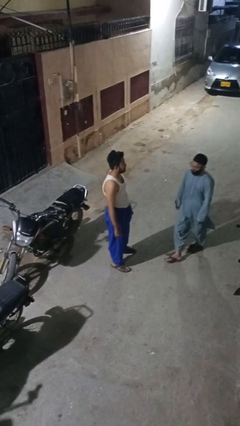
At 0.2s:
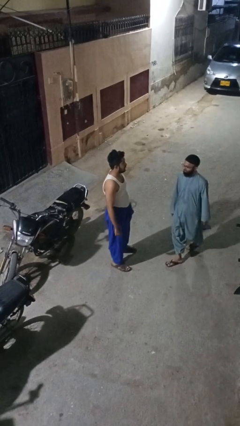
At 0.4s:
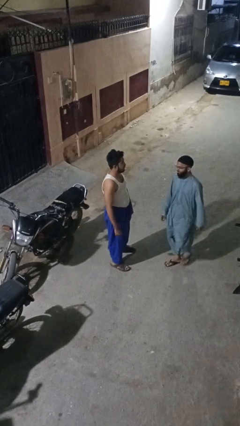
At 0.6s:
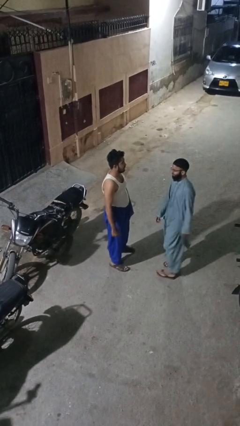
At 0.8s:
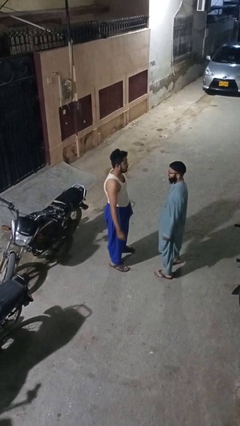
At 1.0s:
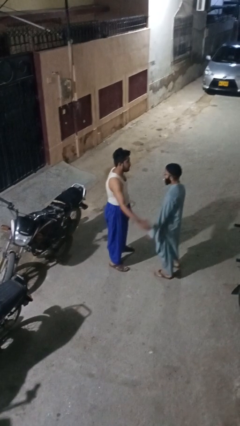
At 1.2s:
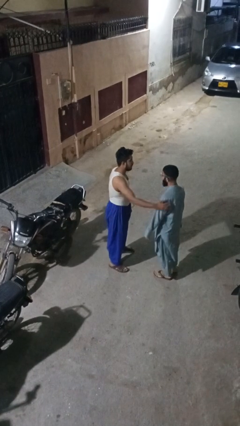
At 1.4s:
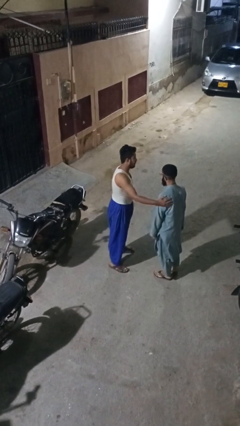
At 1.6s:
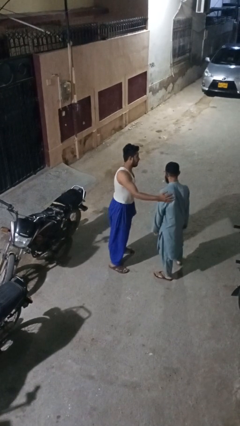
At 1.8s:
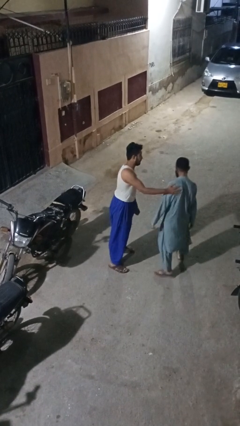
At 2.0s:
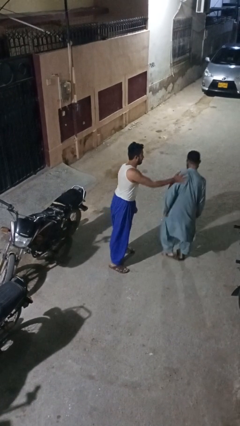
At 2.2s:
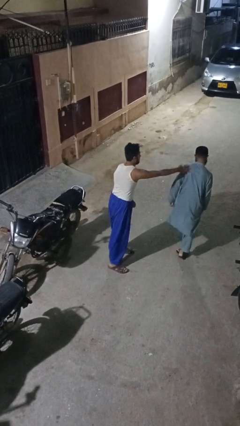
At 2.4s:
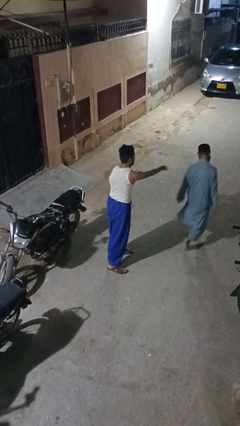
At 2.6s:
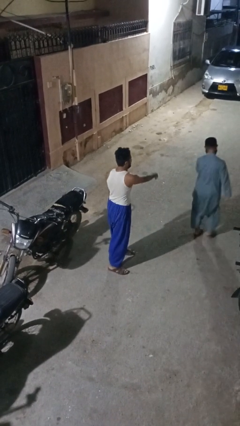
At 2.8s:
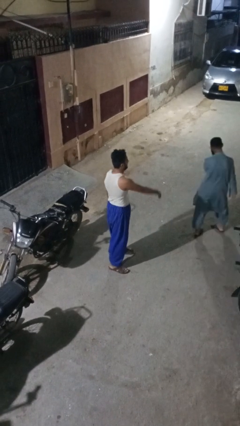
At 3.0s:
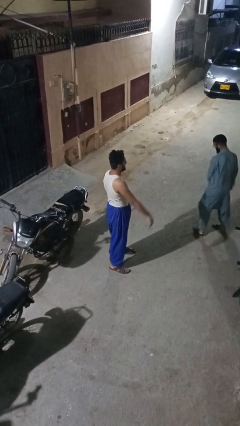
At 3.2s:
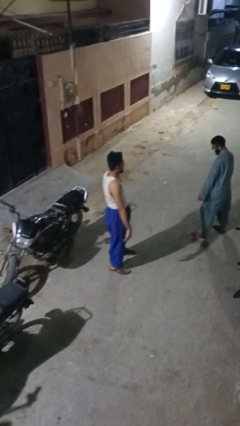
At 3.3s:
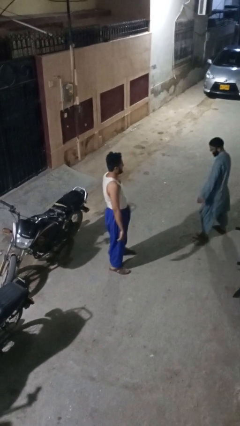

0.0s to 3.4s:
person shoves person

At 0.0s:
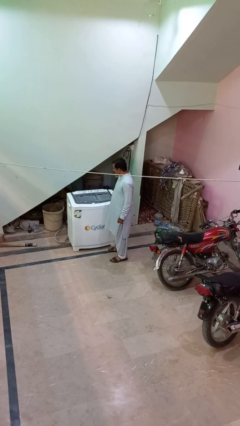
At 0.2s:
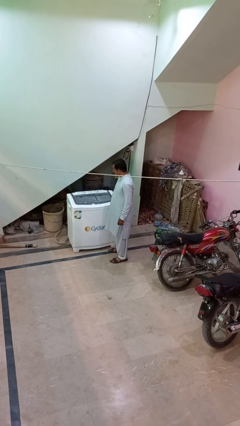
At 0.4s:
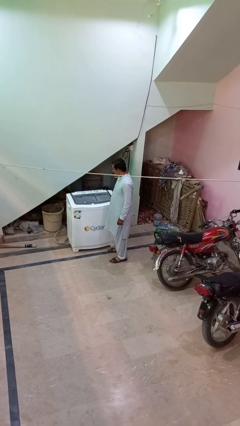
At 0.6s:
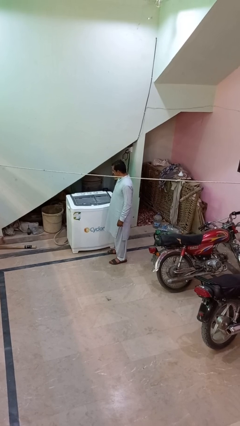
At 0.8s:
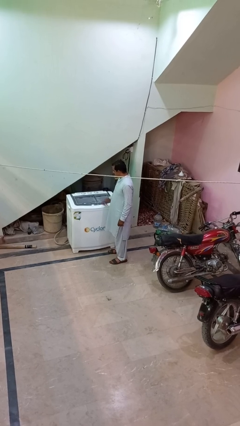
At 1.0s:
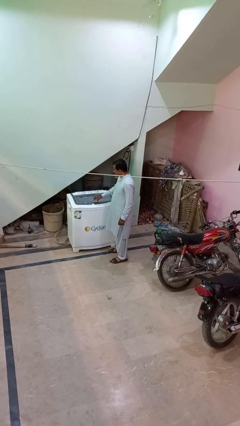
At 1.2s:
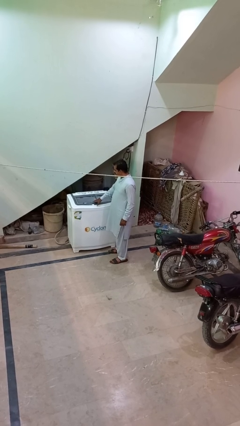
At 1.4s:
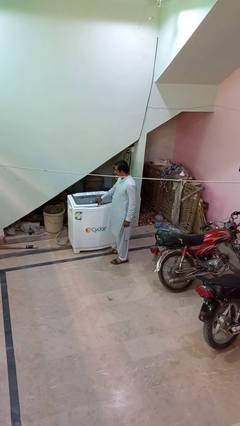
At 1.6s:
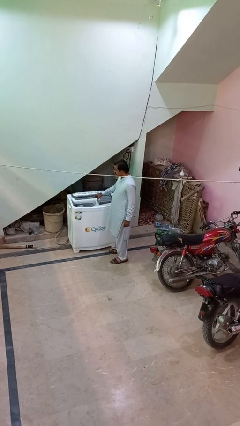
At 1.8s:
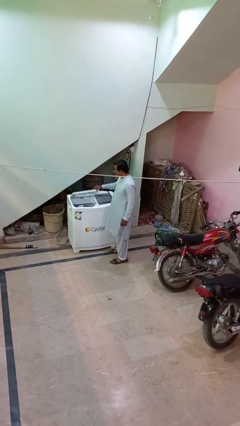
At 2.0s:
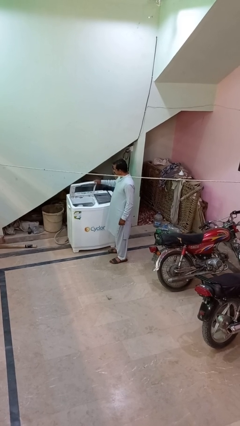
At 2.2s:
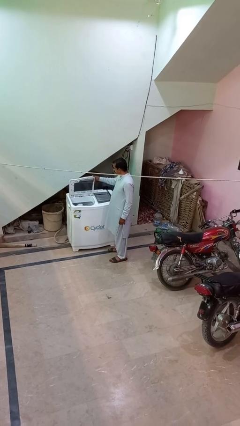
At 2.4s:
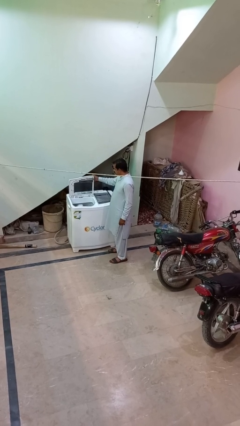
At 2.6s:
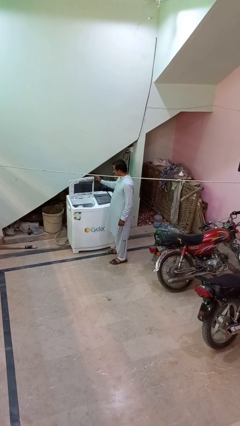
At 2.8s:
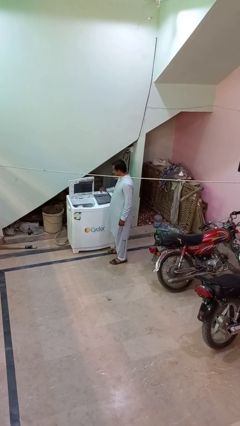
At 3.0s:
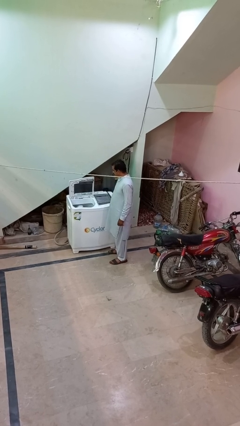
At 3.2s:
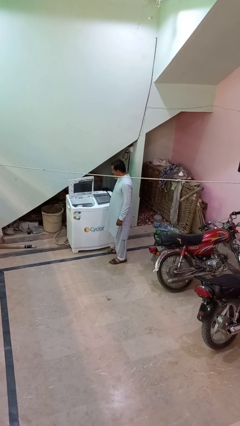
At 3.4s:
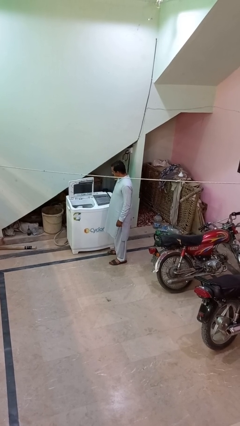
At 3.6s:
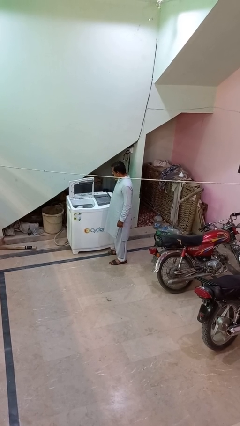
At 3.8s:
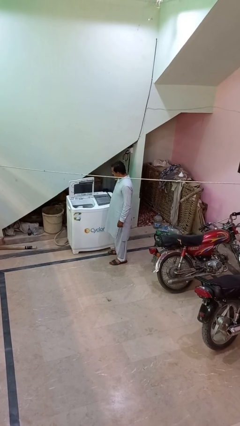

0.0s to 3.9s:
person opens clothes washer

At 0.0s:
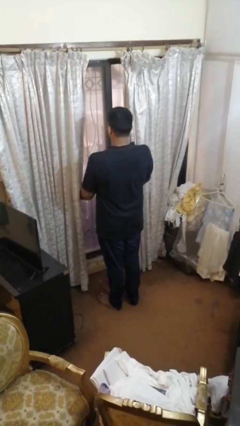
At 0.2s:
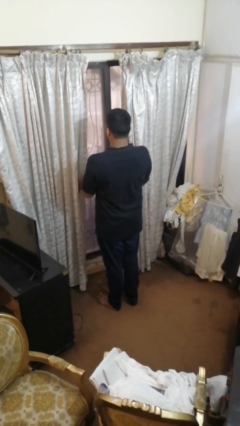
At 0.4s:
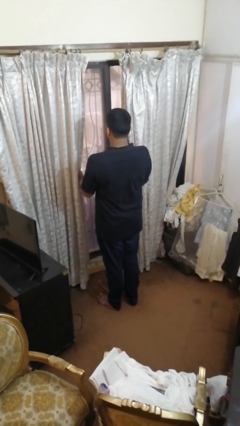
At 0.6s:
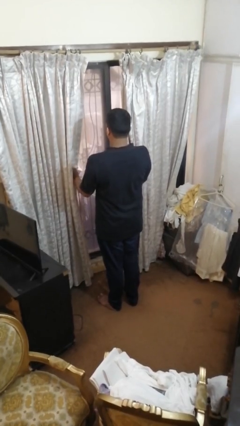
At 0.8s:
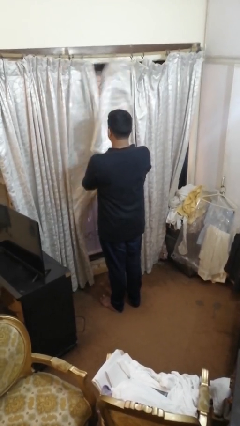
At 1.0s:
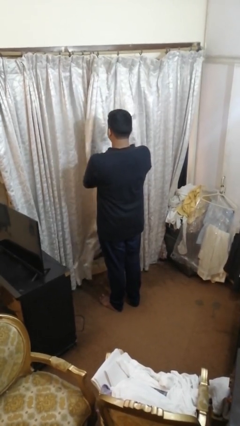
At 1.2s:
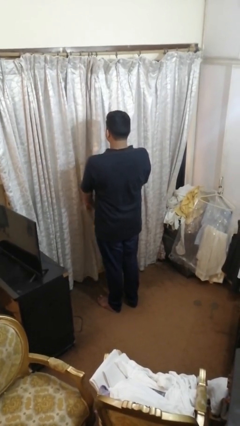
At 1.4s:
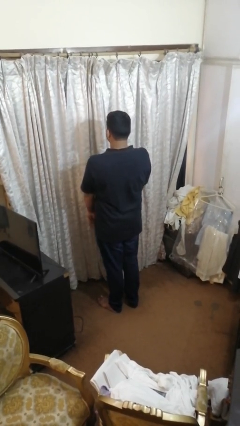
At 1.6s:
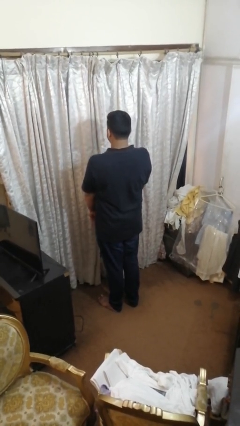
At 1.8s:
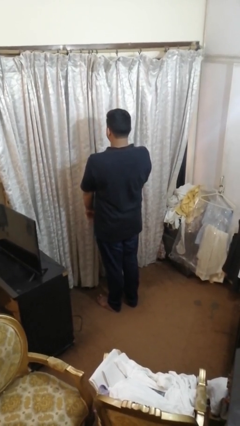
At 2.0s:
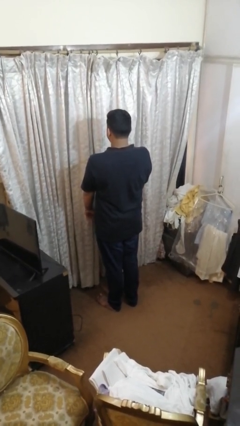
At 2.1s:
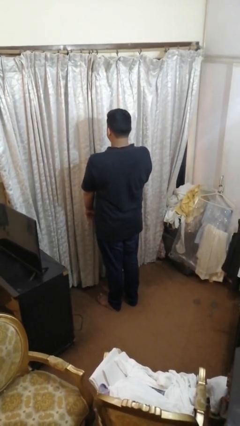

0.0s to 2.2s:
person closes curtains

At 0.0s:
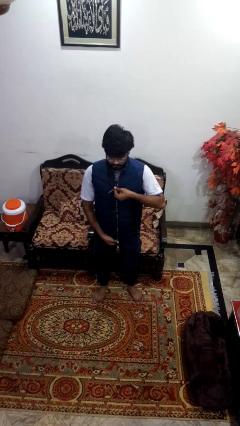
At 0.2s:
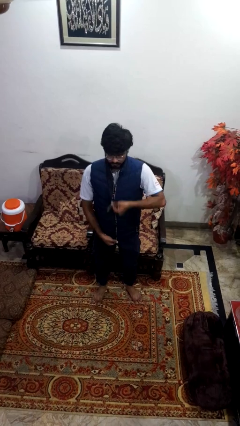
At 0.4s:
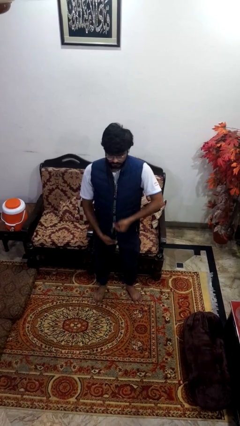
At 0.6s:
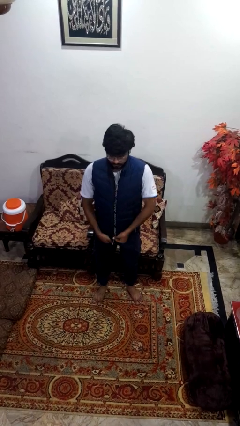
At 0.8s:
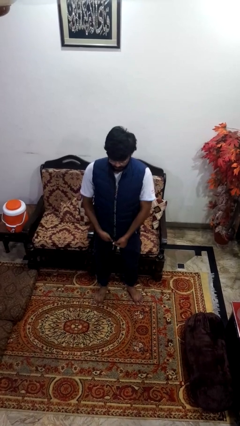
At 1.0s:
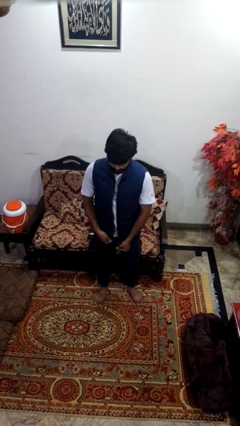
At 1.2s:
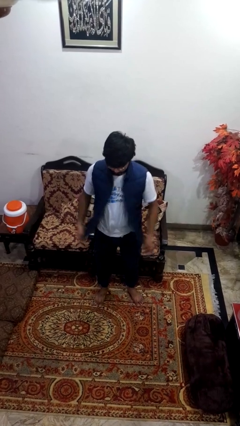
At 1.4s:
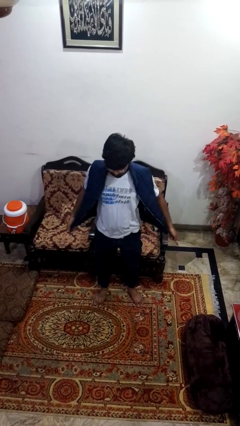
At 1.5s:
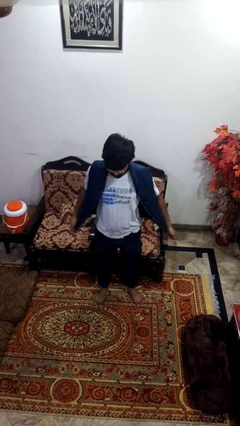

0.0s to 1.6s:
person unzips jacket

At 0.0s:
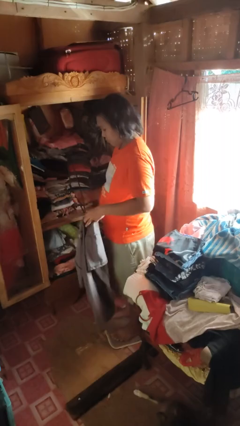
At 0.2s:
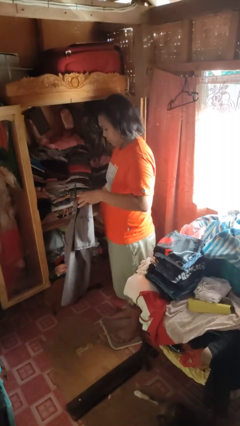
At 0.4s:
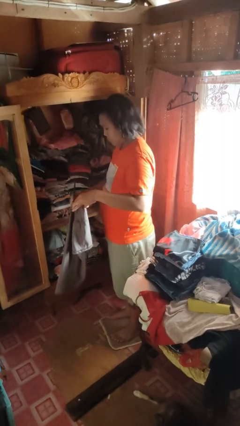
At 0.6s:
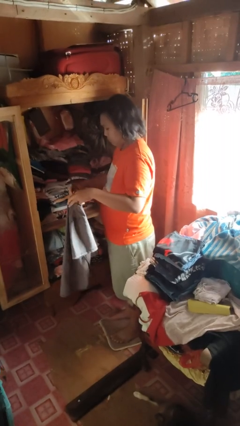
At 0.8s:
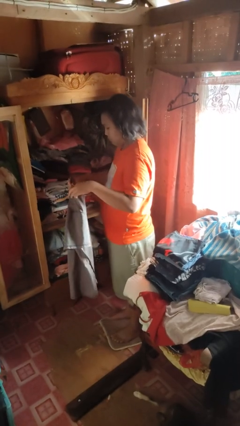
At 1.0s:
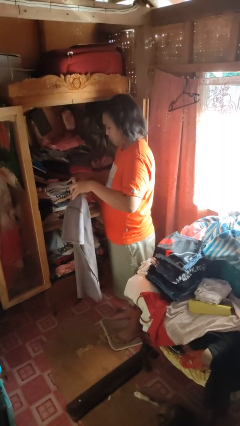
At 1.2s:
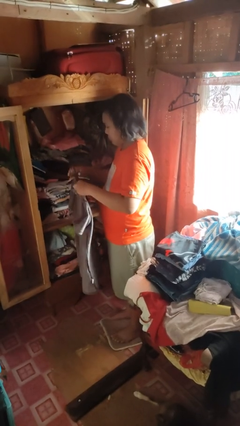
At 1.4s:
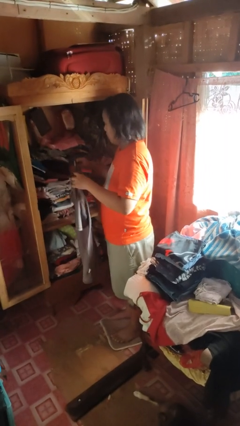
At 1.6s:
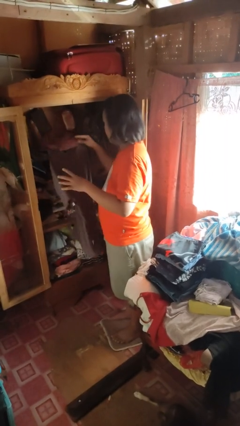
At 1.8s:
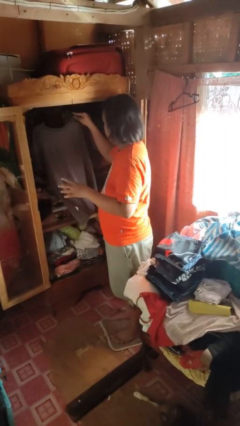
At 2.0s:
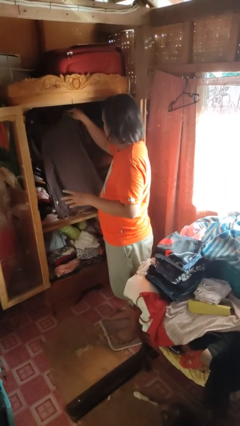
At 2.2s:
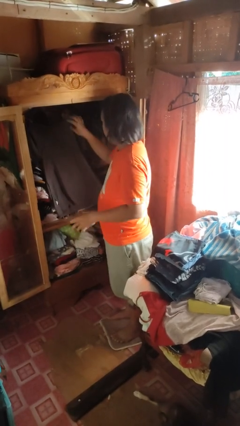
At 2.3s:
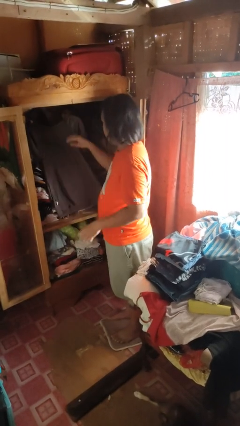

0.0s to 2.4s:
person puts clothes into closet

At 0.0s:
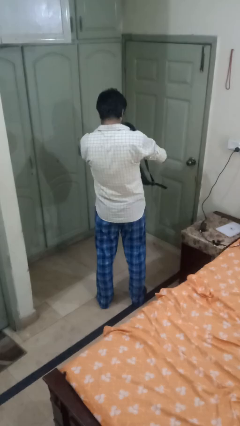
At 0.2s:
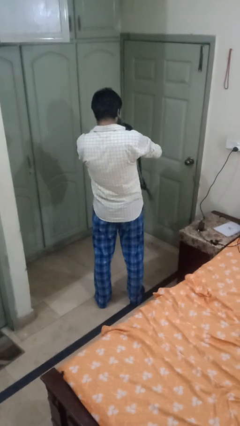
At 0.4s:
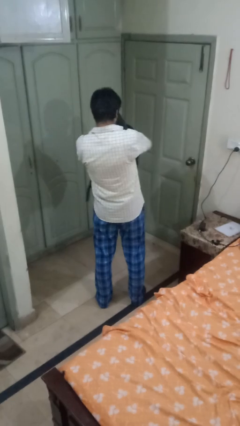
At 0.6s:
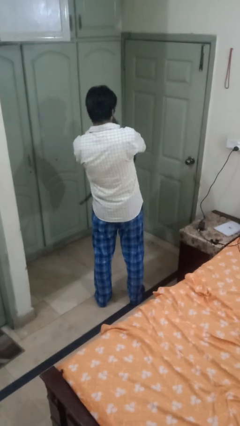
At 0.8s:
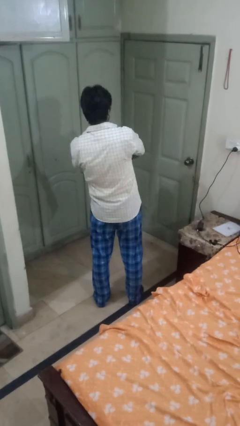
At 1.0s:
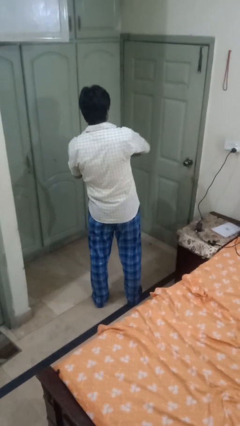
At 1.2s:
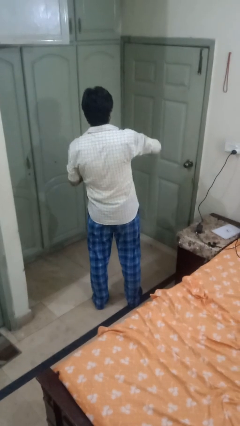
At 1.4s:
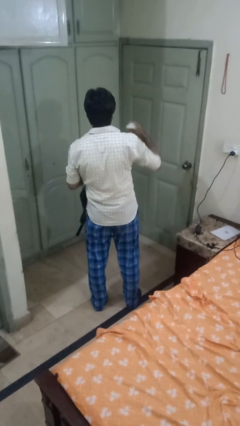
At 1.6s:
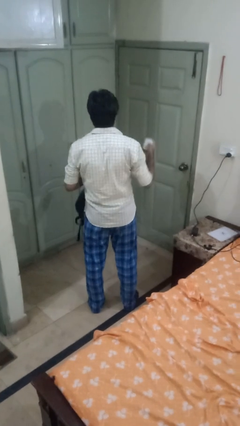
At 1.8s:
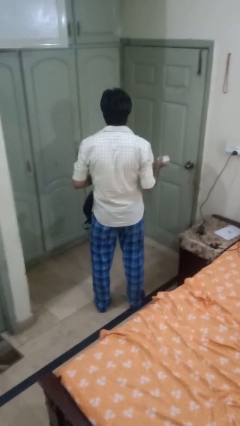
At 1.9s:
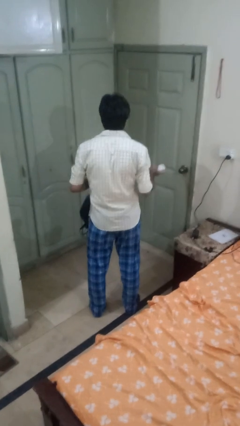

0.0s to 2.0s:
person takes object from backpack

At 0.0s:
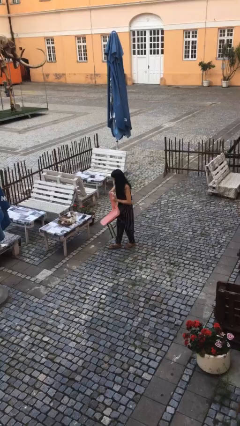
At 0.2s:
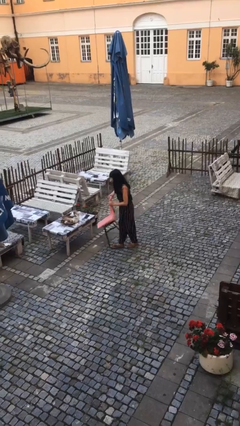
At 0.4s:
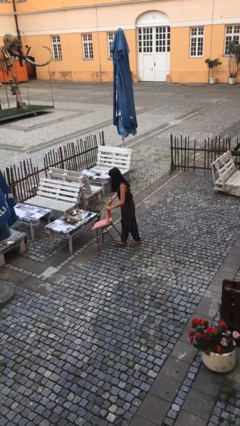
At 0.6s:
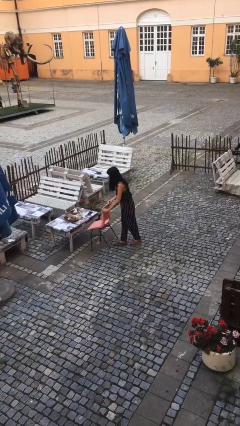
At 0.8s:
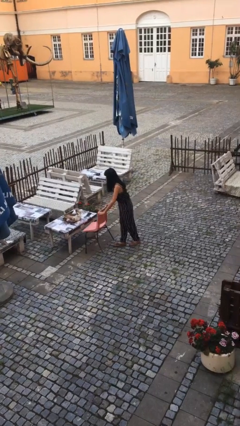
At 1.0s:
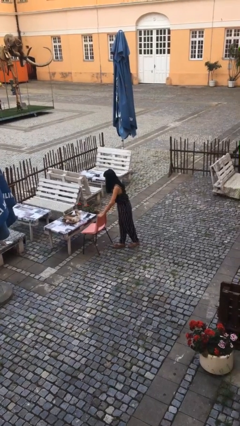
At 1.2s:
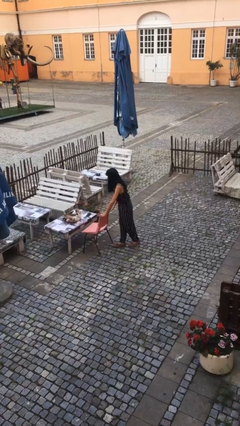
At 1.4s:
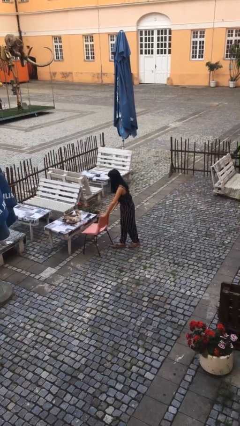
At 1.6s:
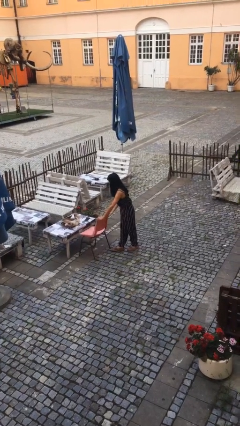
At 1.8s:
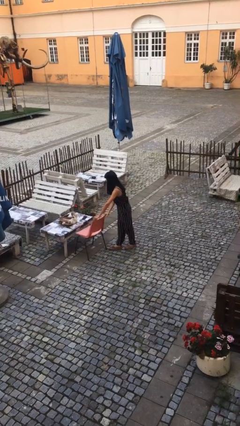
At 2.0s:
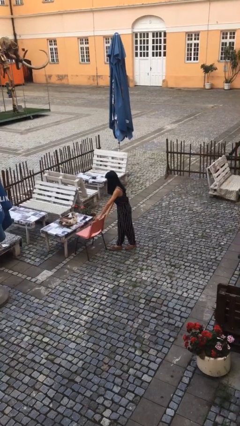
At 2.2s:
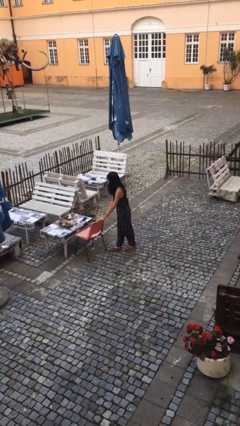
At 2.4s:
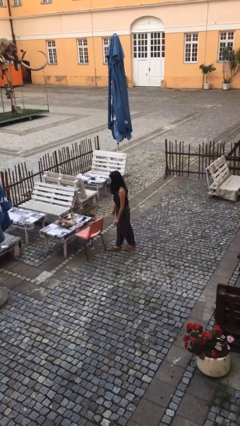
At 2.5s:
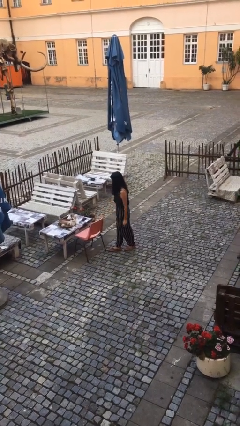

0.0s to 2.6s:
person puts down object on floor
